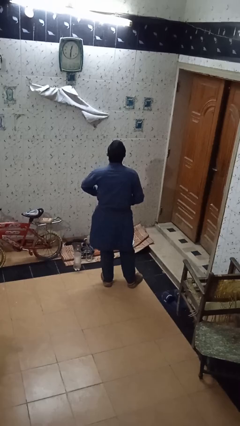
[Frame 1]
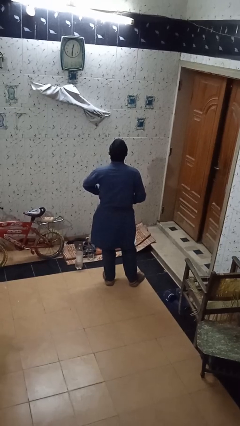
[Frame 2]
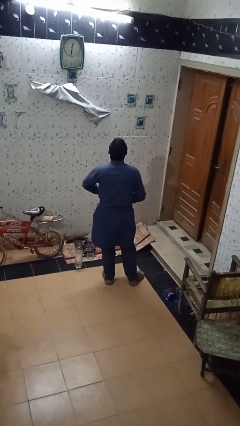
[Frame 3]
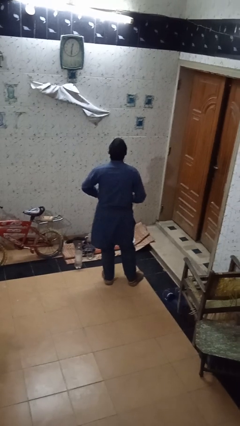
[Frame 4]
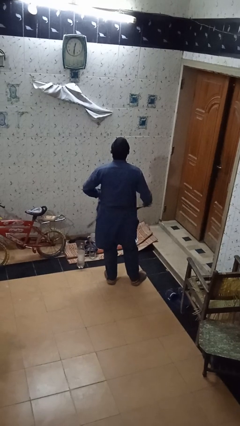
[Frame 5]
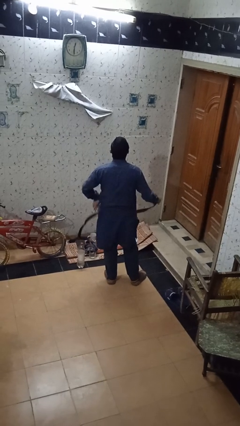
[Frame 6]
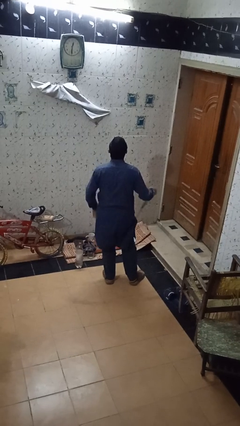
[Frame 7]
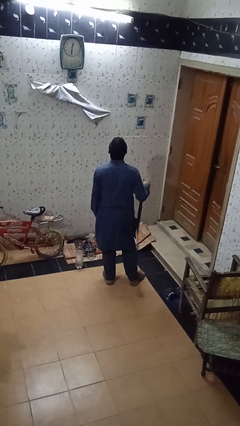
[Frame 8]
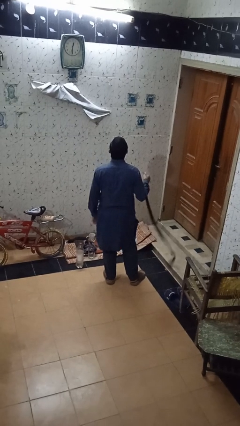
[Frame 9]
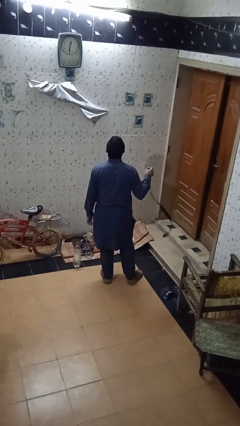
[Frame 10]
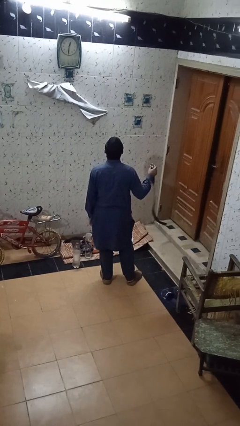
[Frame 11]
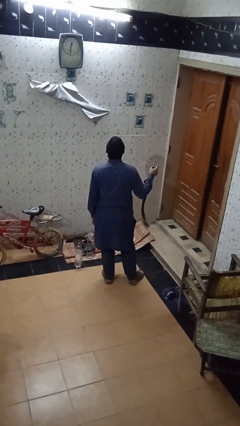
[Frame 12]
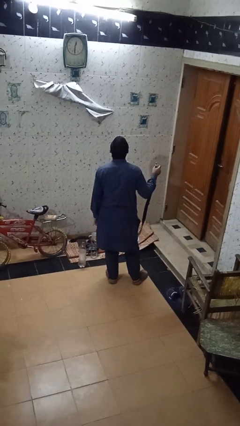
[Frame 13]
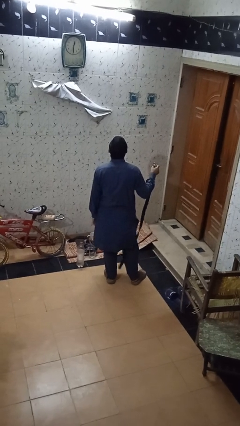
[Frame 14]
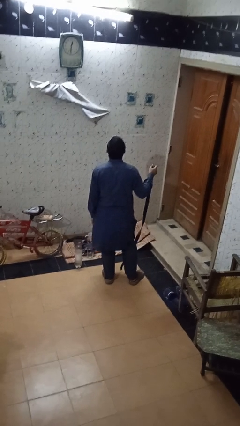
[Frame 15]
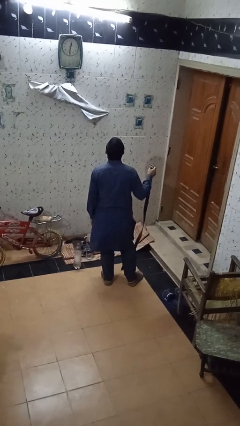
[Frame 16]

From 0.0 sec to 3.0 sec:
person takes off belt

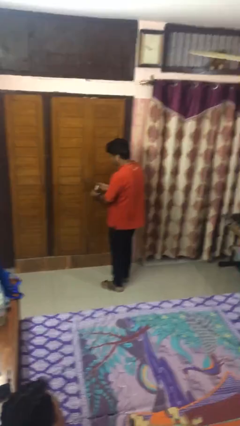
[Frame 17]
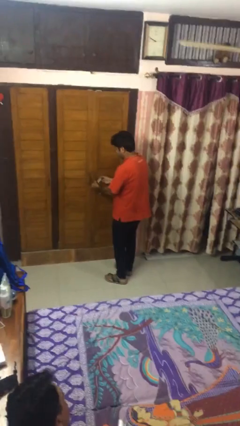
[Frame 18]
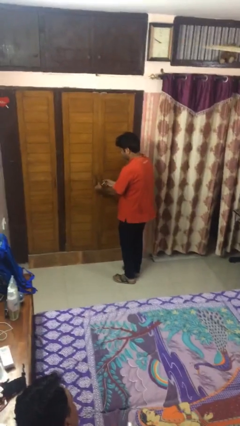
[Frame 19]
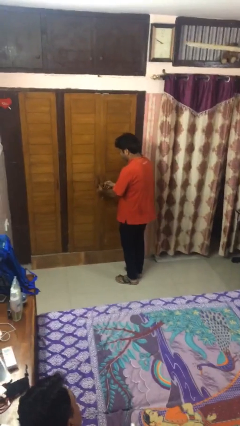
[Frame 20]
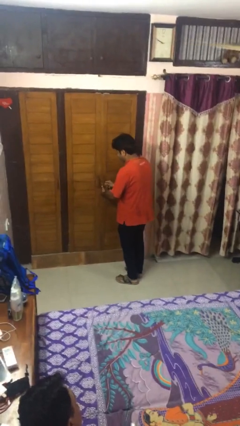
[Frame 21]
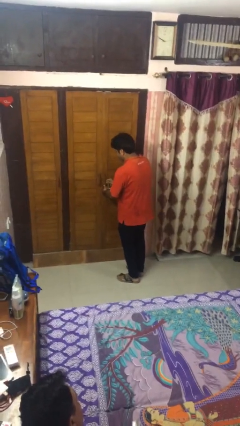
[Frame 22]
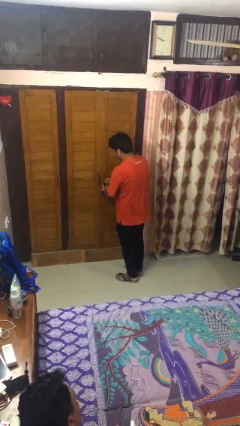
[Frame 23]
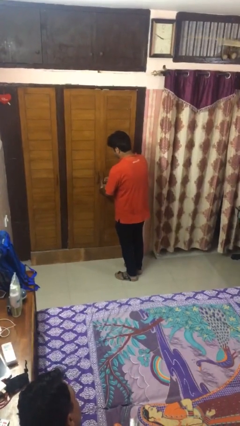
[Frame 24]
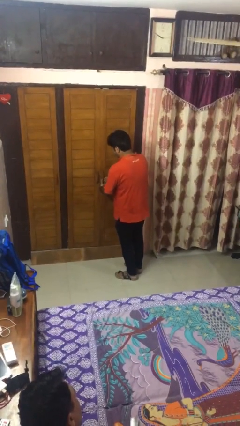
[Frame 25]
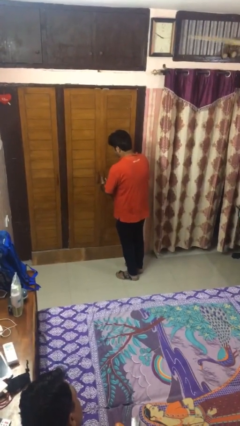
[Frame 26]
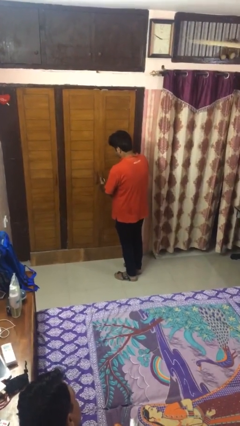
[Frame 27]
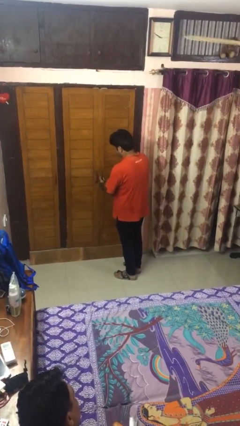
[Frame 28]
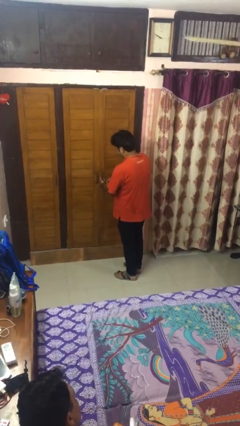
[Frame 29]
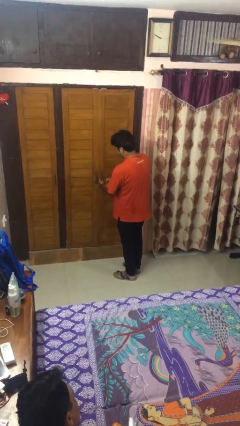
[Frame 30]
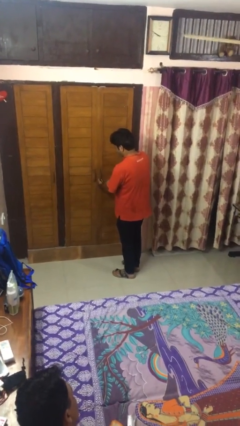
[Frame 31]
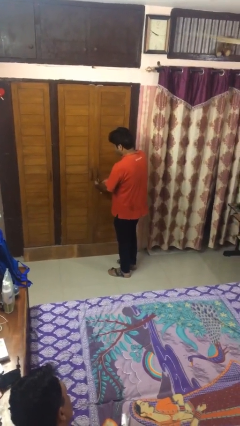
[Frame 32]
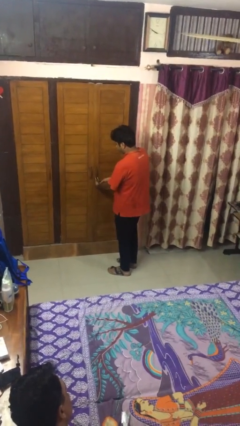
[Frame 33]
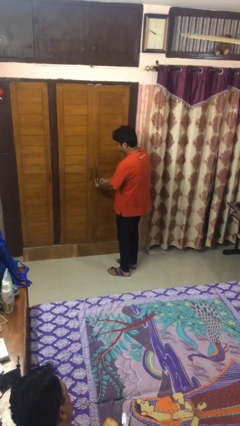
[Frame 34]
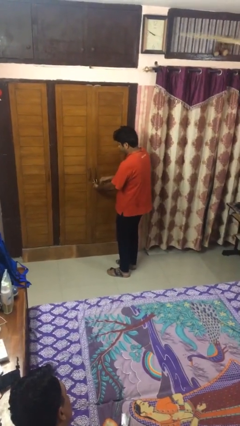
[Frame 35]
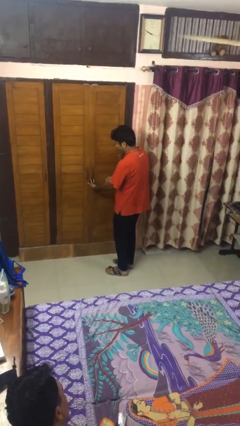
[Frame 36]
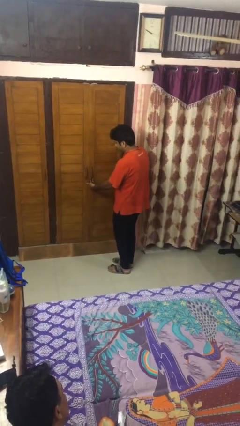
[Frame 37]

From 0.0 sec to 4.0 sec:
person locks door with keys

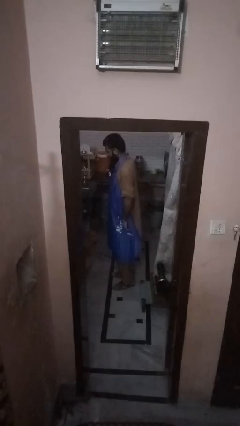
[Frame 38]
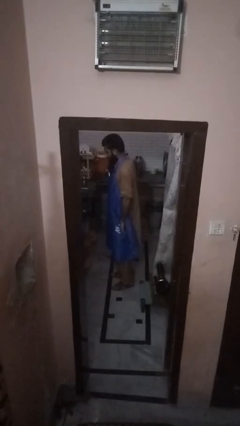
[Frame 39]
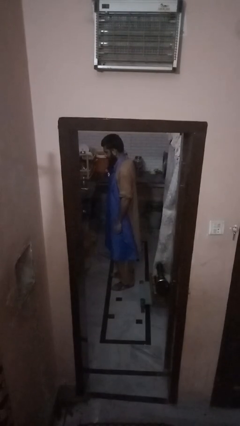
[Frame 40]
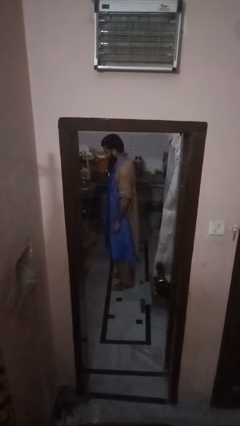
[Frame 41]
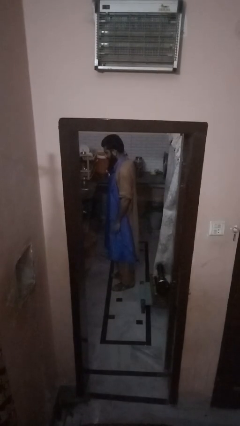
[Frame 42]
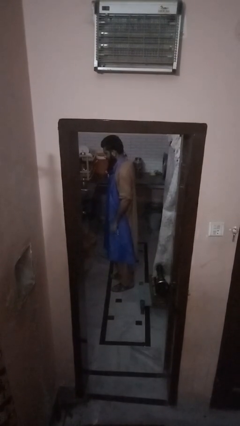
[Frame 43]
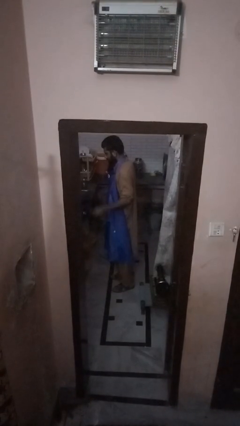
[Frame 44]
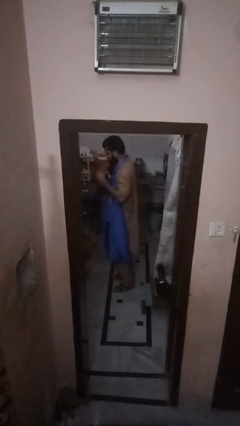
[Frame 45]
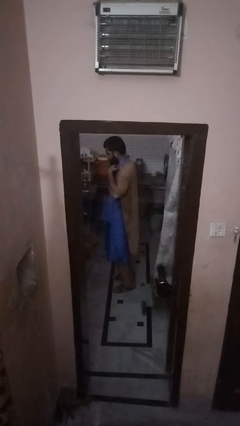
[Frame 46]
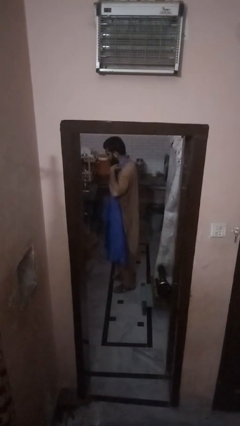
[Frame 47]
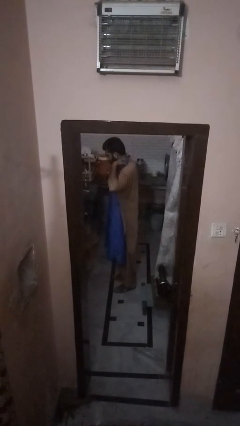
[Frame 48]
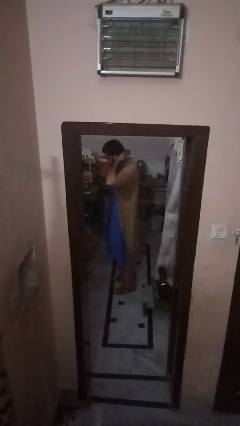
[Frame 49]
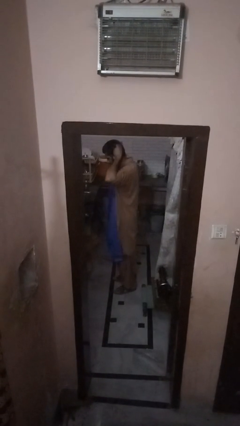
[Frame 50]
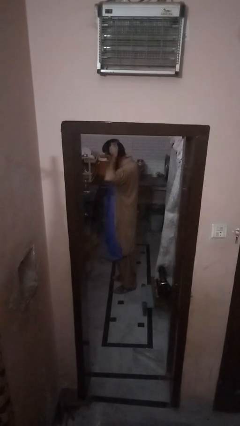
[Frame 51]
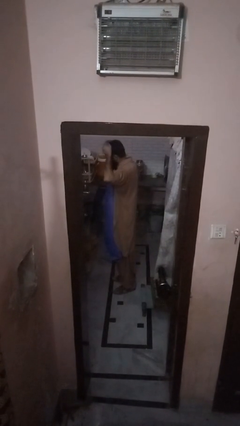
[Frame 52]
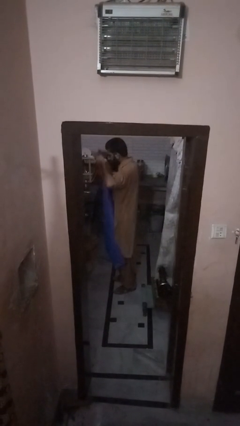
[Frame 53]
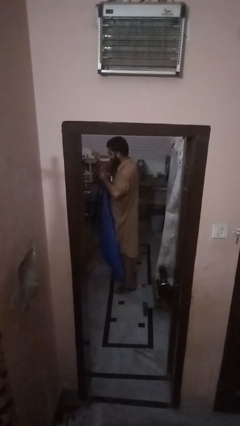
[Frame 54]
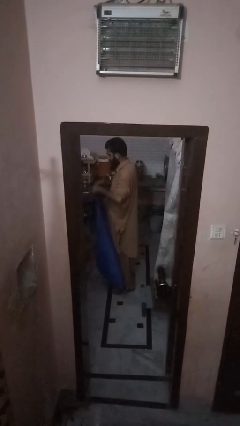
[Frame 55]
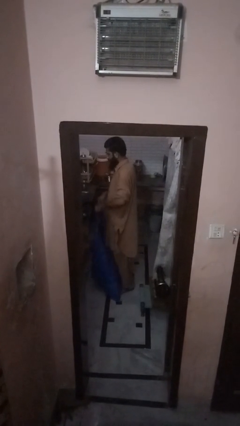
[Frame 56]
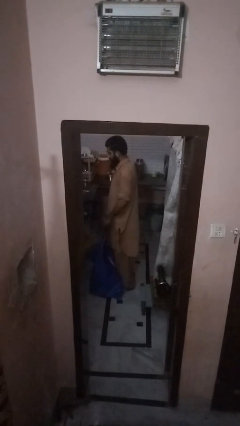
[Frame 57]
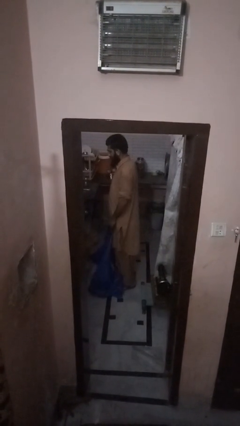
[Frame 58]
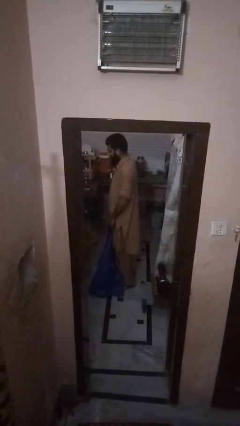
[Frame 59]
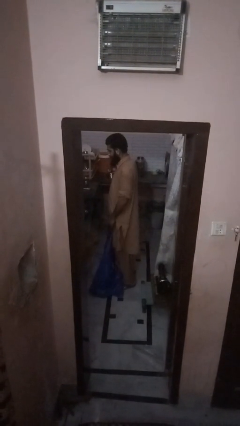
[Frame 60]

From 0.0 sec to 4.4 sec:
person takes off apron

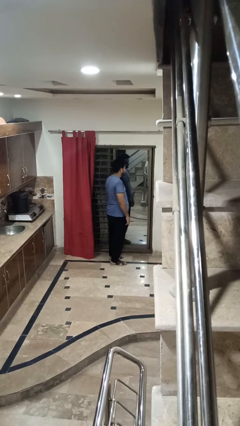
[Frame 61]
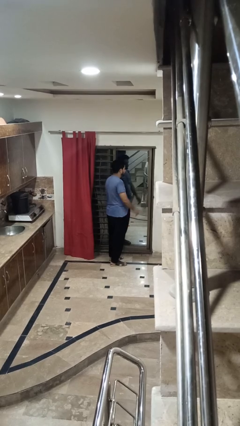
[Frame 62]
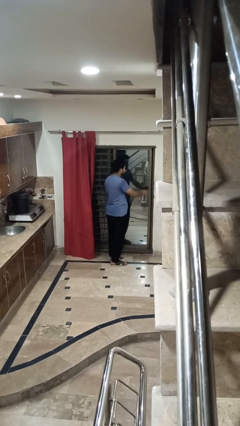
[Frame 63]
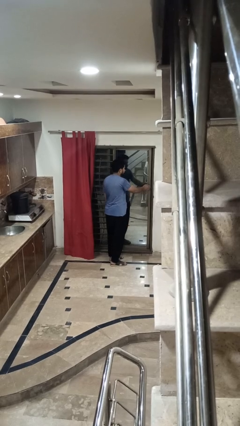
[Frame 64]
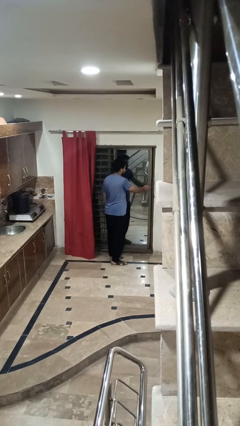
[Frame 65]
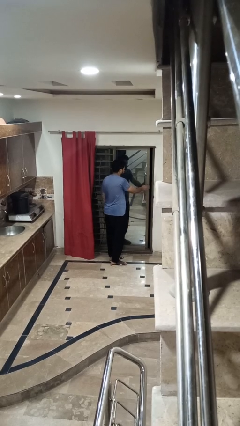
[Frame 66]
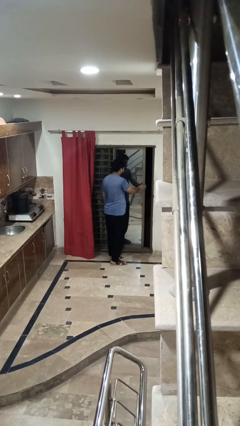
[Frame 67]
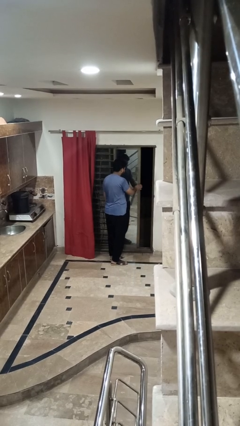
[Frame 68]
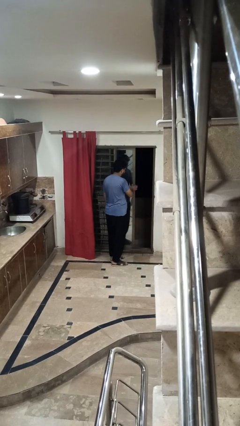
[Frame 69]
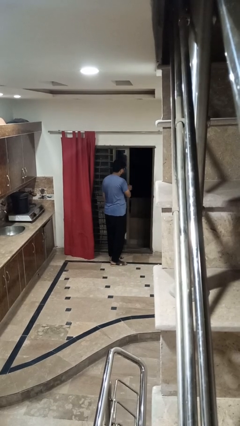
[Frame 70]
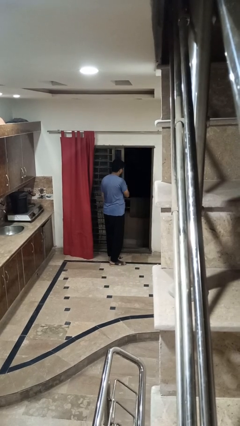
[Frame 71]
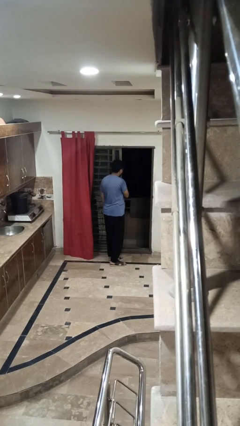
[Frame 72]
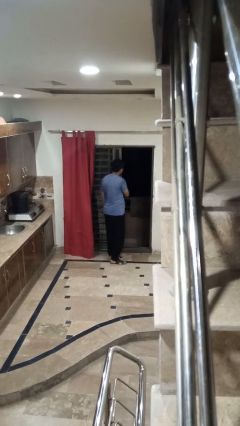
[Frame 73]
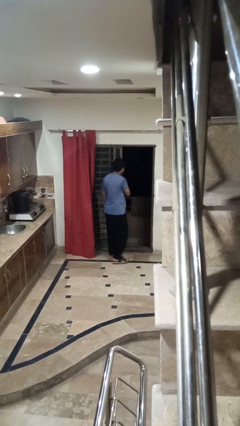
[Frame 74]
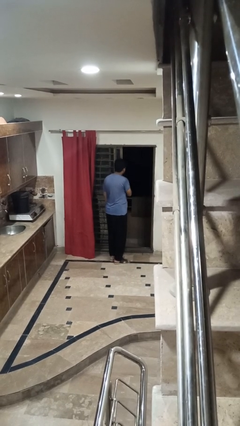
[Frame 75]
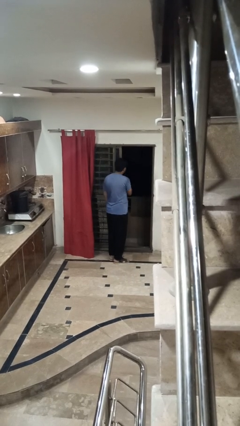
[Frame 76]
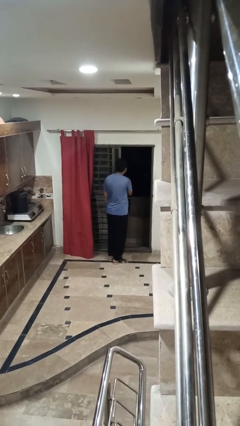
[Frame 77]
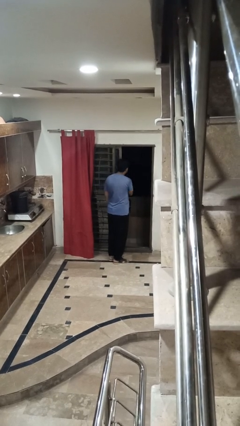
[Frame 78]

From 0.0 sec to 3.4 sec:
person opens sliding door

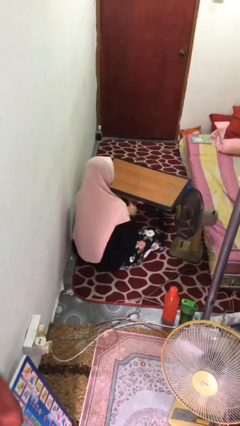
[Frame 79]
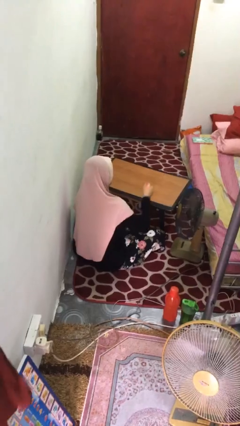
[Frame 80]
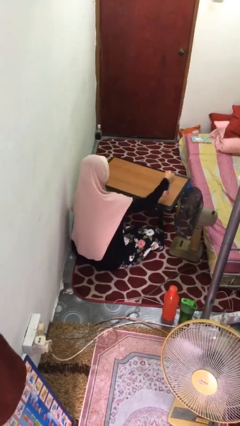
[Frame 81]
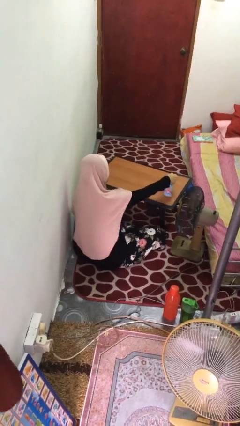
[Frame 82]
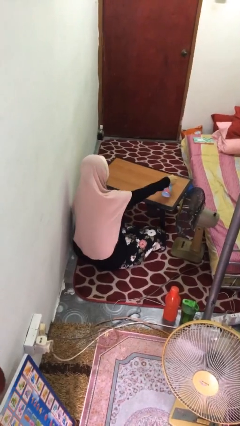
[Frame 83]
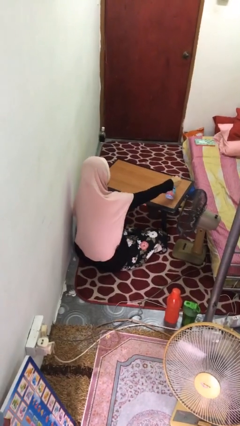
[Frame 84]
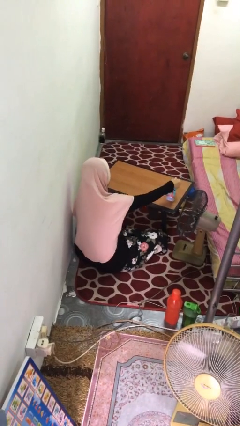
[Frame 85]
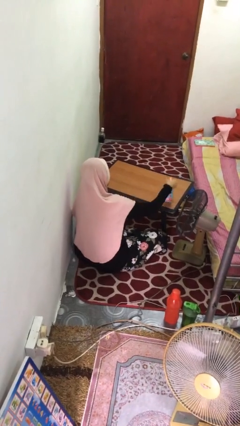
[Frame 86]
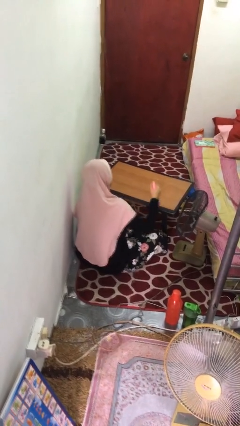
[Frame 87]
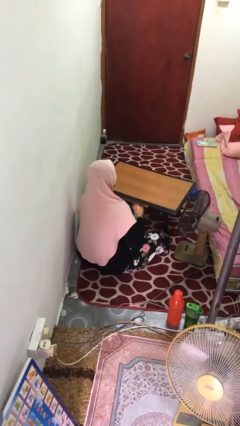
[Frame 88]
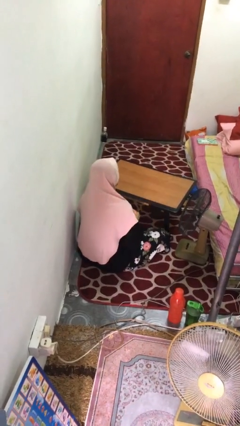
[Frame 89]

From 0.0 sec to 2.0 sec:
person sprays from bottle

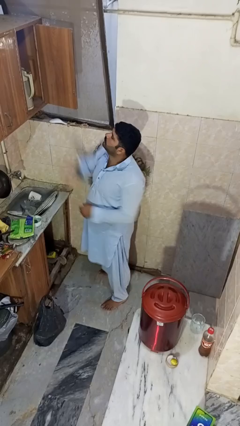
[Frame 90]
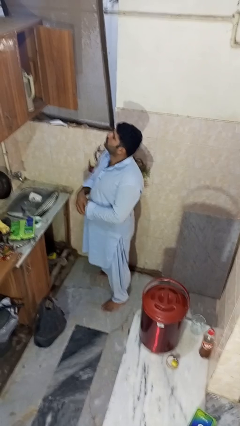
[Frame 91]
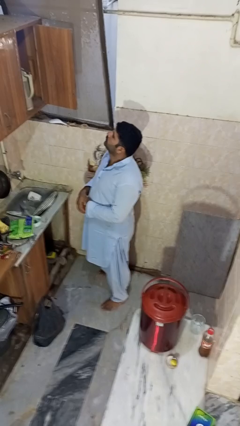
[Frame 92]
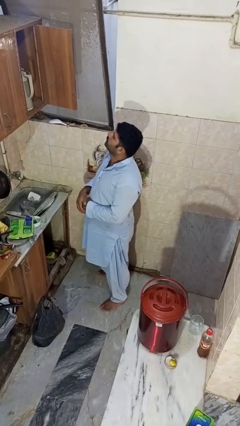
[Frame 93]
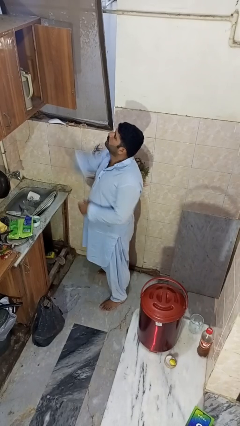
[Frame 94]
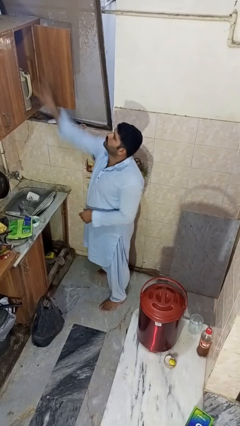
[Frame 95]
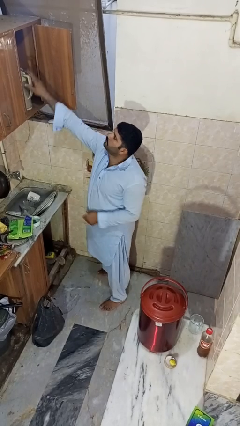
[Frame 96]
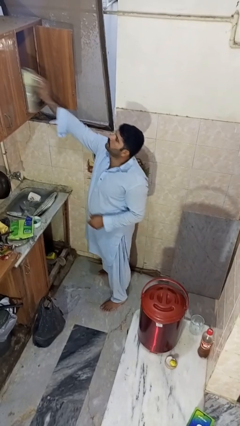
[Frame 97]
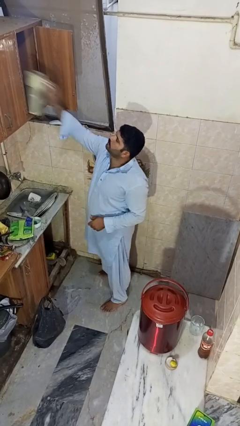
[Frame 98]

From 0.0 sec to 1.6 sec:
person takes object from cabinet
